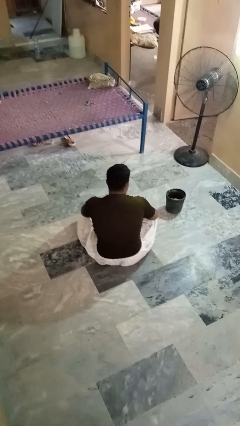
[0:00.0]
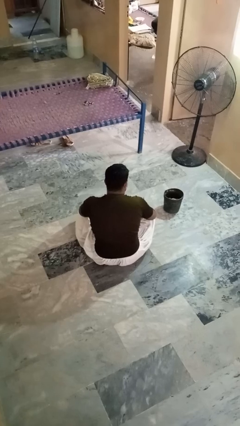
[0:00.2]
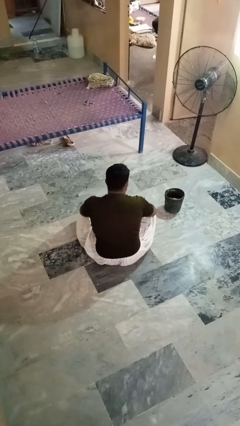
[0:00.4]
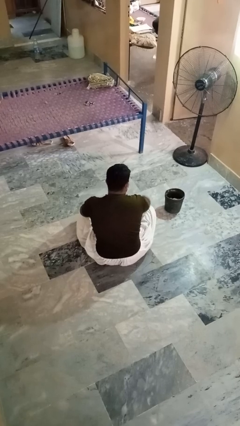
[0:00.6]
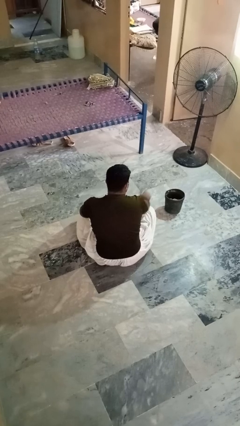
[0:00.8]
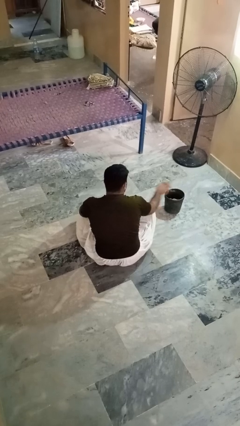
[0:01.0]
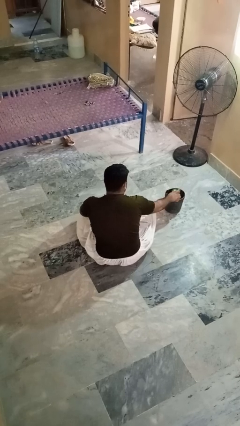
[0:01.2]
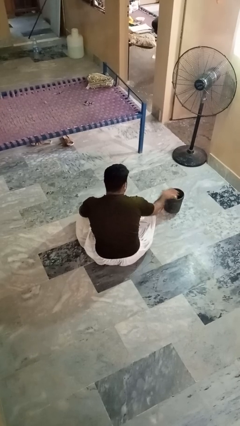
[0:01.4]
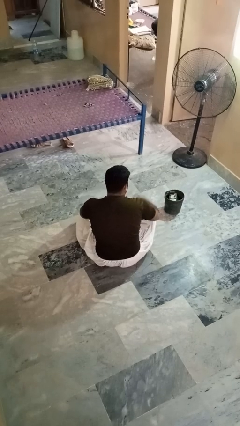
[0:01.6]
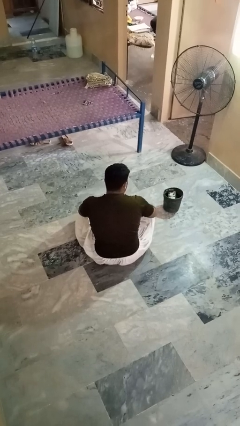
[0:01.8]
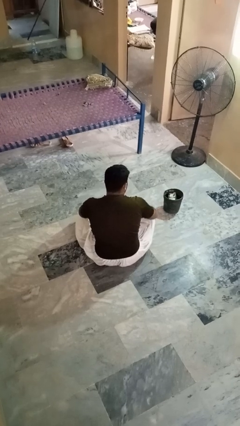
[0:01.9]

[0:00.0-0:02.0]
person puts object into basket

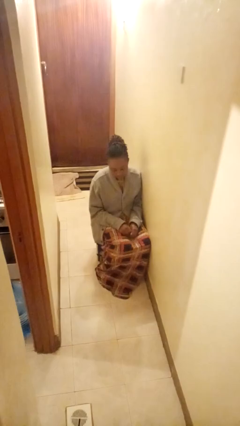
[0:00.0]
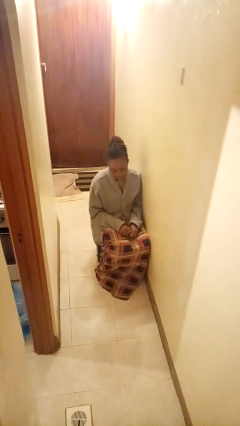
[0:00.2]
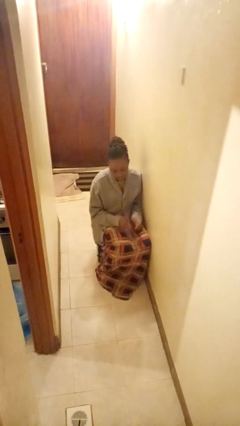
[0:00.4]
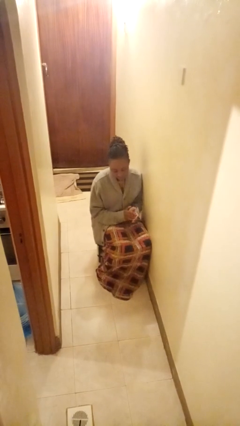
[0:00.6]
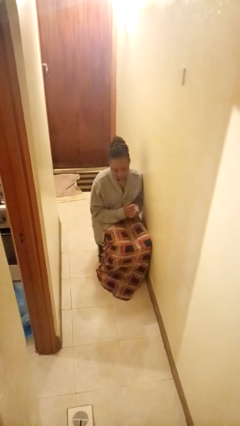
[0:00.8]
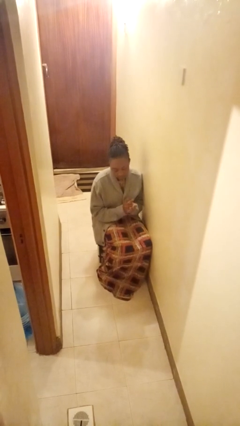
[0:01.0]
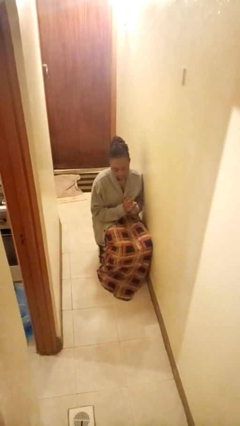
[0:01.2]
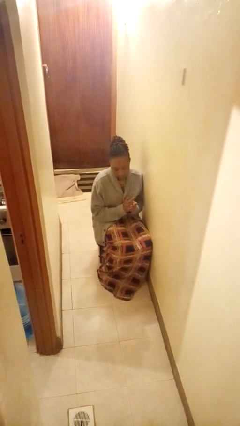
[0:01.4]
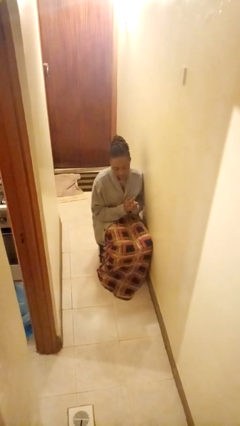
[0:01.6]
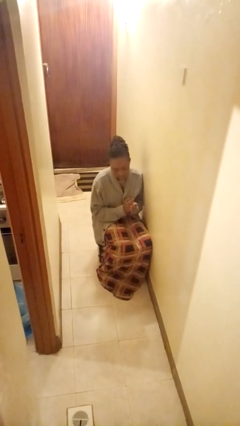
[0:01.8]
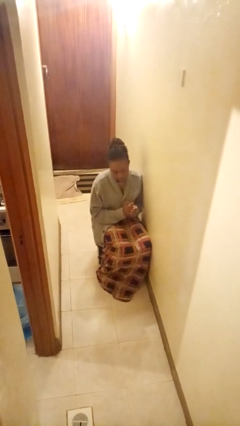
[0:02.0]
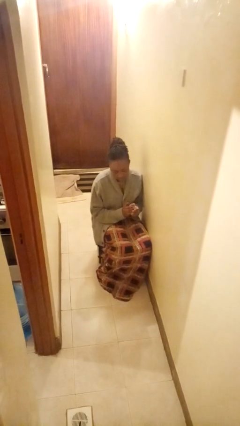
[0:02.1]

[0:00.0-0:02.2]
person claps hands

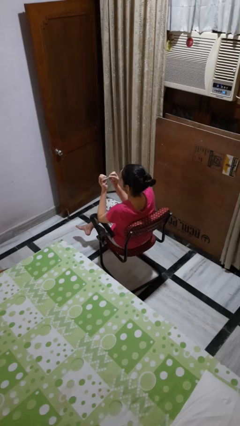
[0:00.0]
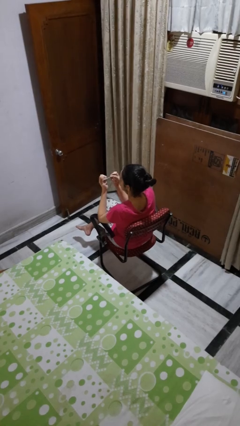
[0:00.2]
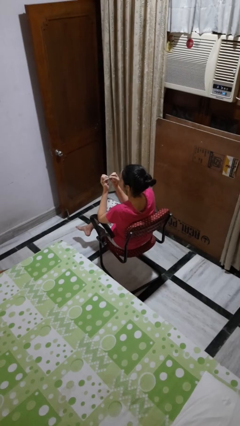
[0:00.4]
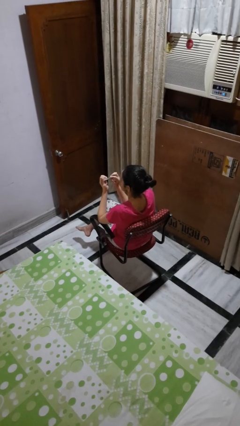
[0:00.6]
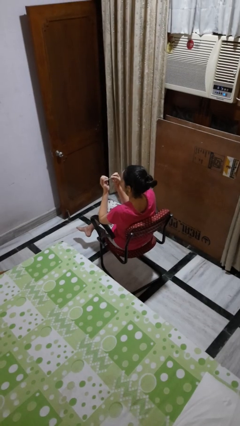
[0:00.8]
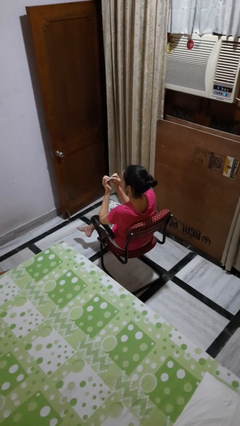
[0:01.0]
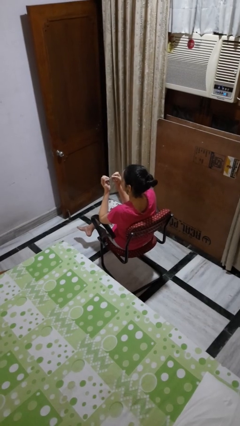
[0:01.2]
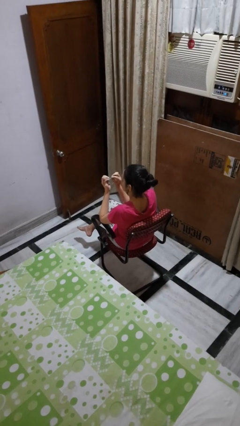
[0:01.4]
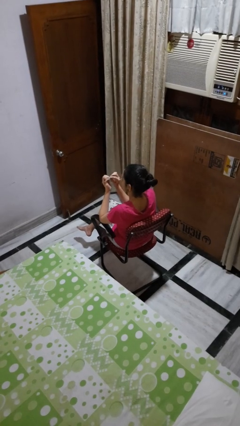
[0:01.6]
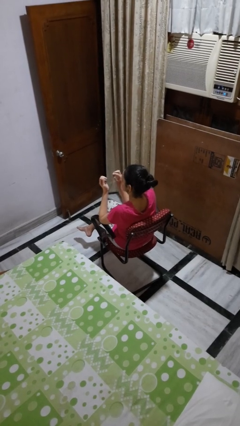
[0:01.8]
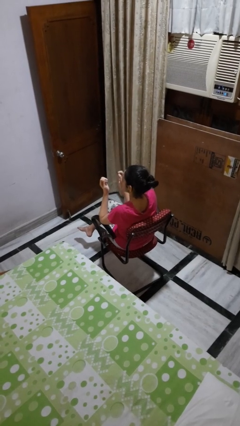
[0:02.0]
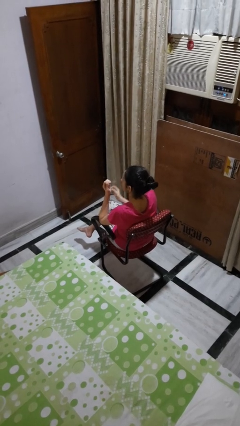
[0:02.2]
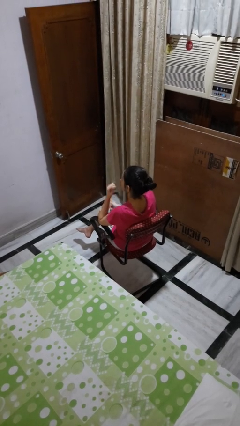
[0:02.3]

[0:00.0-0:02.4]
person files fingernails

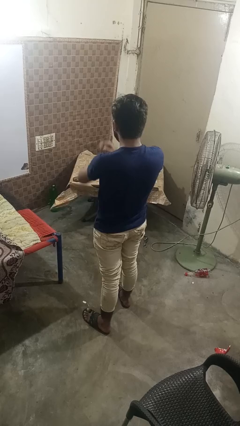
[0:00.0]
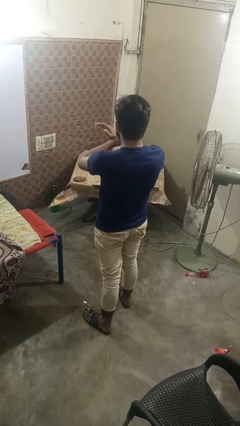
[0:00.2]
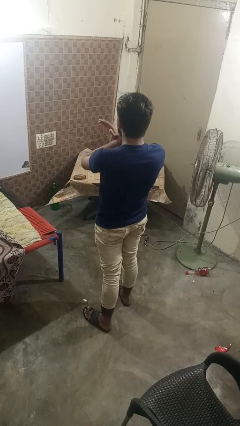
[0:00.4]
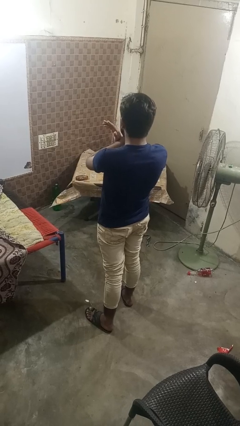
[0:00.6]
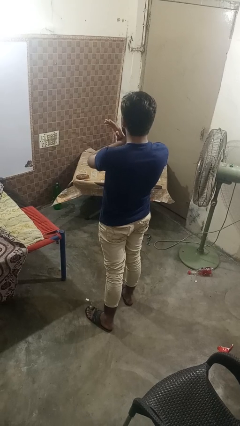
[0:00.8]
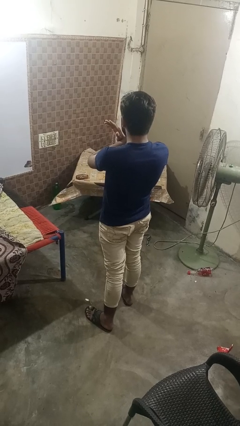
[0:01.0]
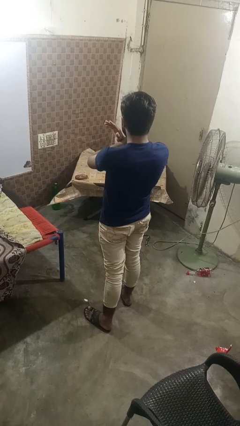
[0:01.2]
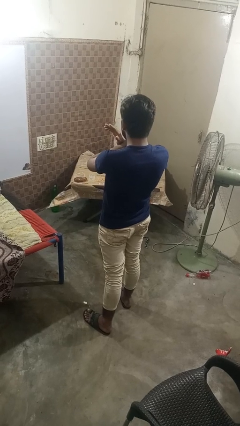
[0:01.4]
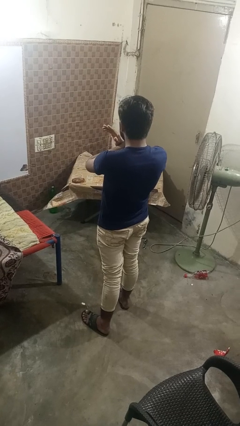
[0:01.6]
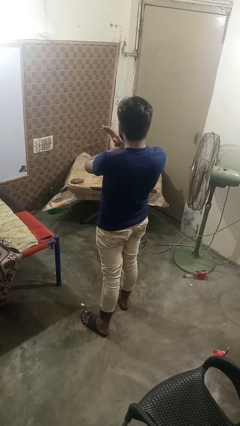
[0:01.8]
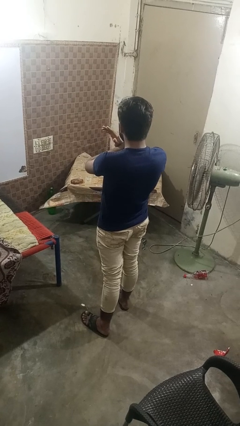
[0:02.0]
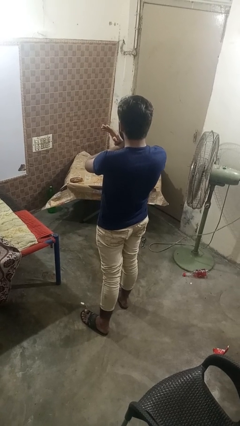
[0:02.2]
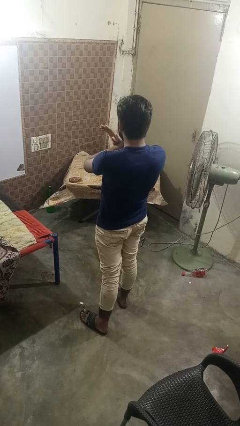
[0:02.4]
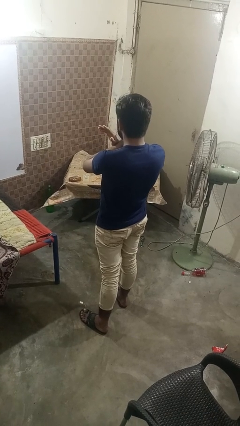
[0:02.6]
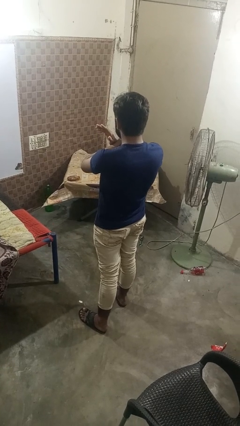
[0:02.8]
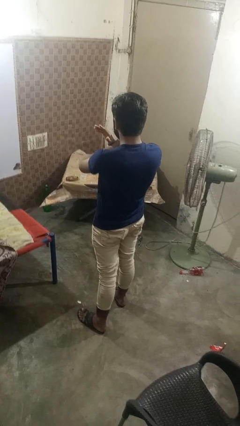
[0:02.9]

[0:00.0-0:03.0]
person karate chop

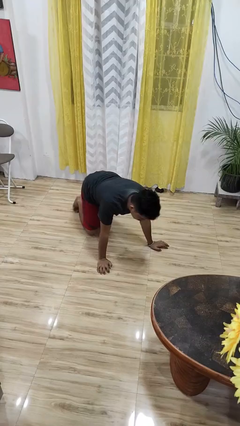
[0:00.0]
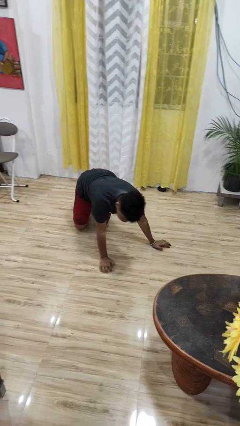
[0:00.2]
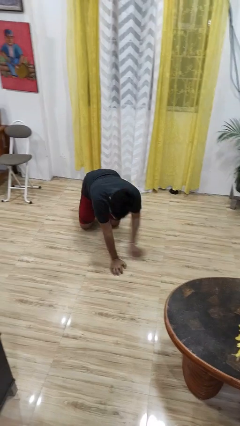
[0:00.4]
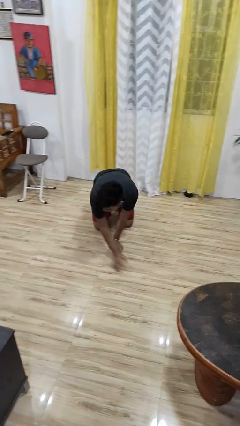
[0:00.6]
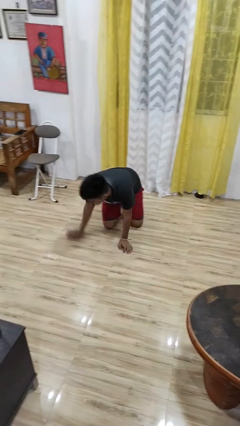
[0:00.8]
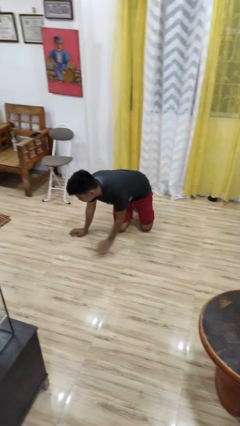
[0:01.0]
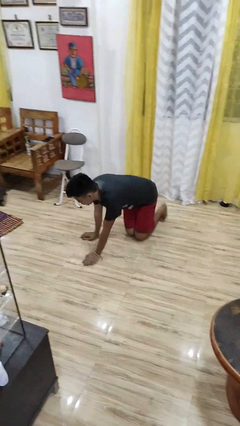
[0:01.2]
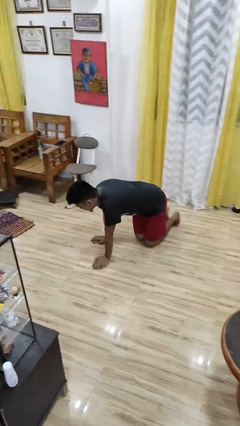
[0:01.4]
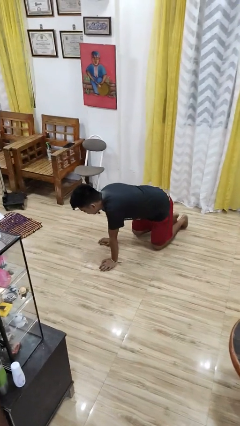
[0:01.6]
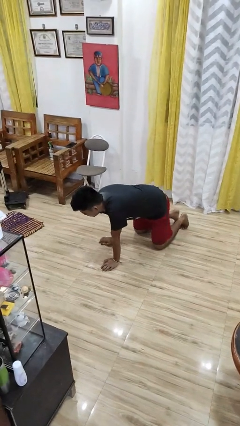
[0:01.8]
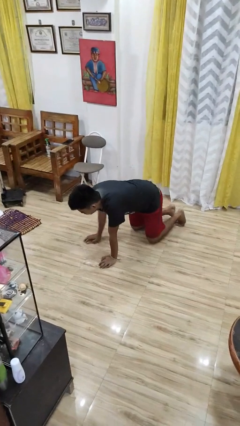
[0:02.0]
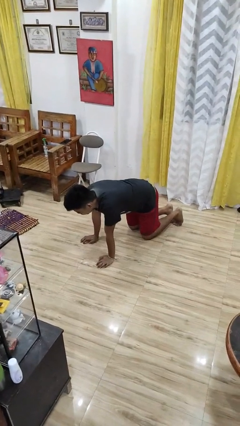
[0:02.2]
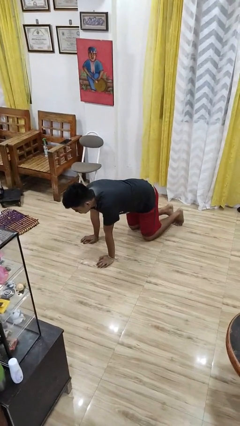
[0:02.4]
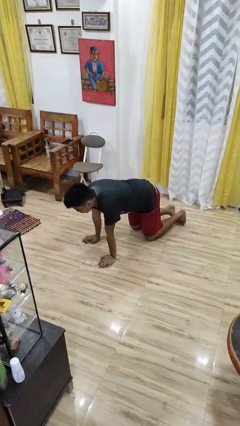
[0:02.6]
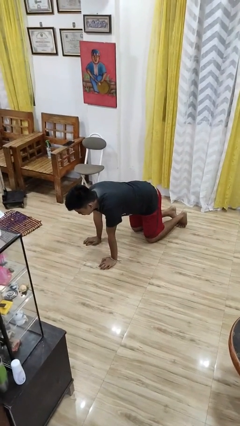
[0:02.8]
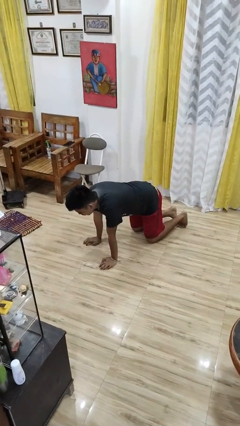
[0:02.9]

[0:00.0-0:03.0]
person crawls

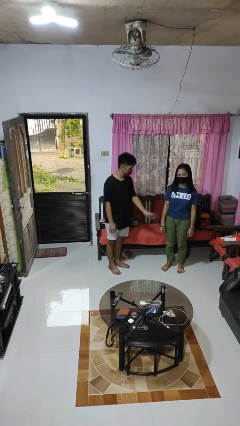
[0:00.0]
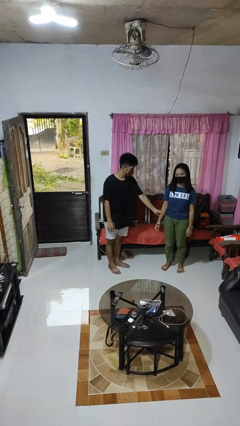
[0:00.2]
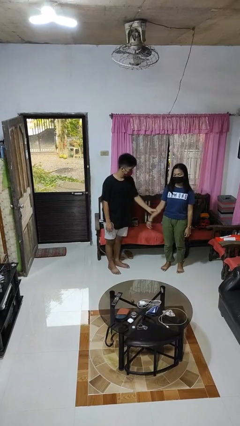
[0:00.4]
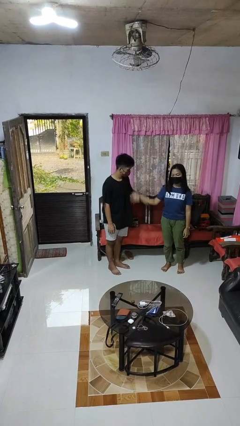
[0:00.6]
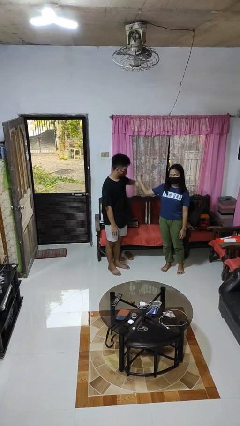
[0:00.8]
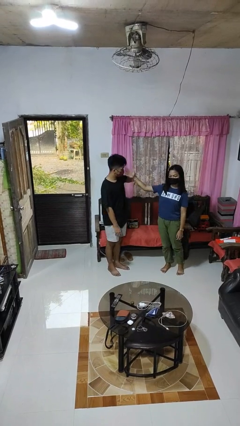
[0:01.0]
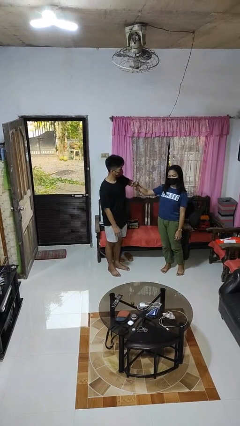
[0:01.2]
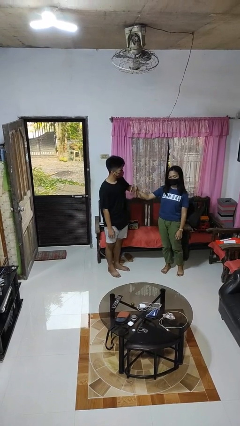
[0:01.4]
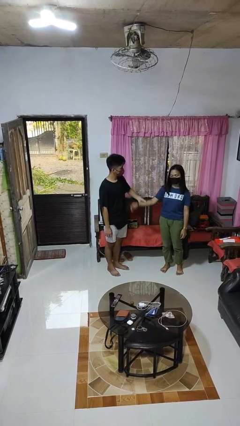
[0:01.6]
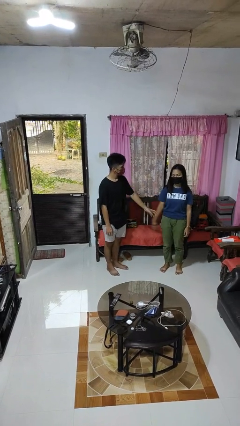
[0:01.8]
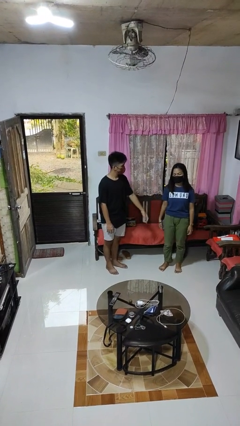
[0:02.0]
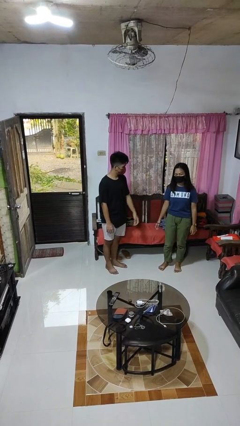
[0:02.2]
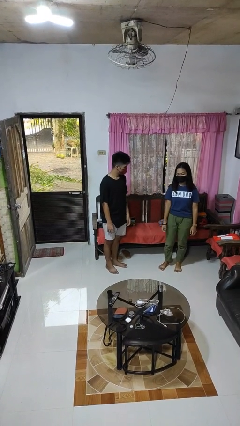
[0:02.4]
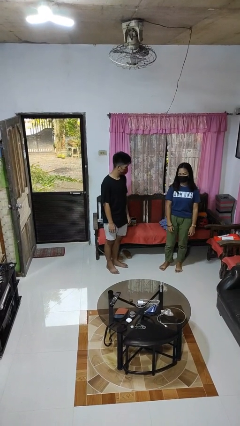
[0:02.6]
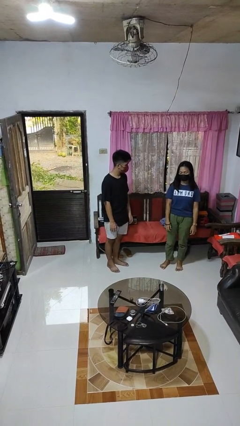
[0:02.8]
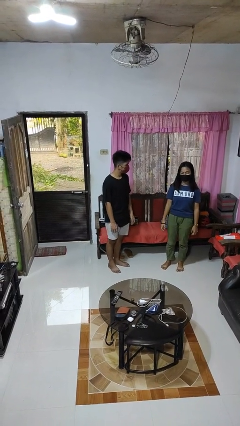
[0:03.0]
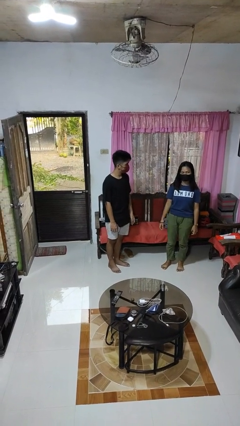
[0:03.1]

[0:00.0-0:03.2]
person grabs person by forearm

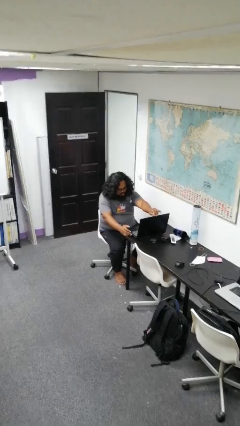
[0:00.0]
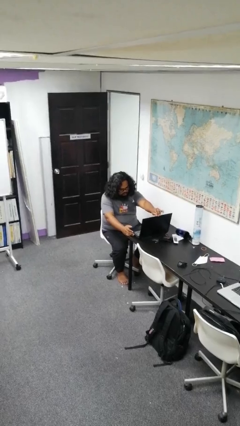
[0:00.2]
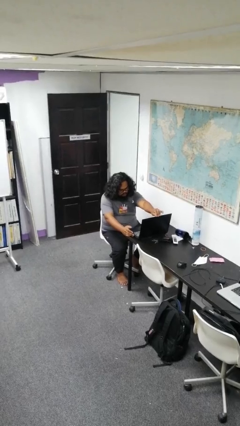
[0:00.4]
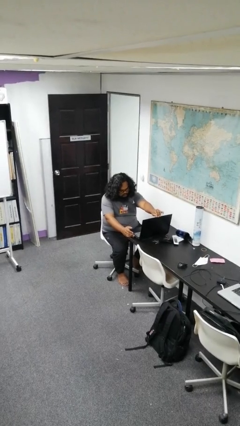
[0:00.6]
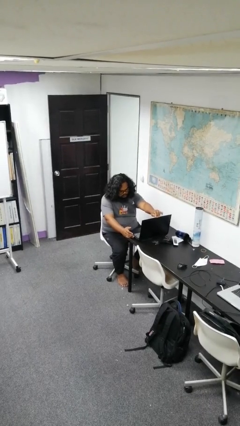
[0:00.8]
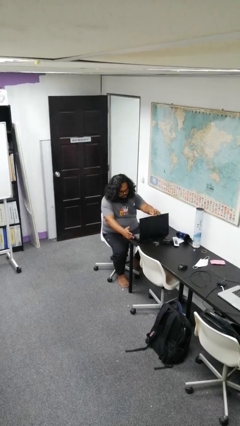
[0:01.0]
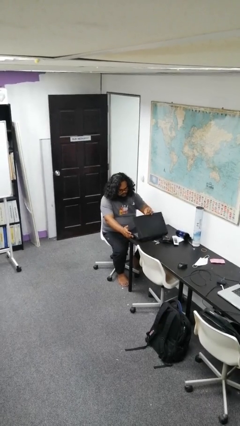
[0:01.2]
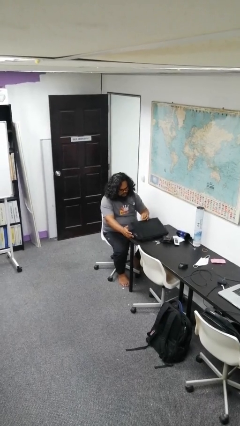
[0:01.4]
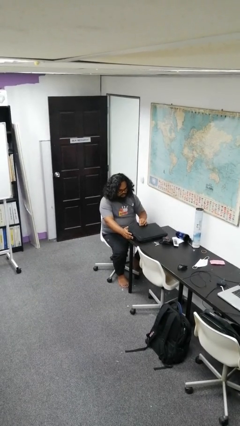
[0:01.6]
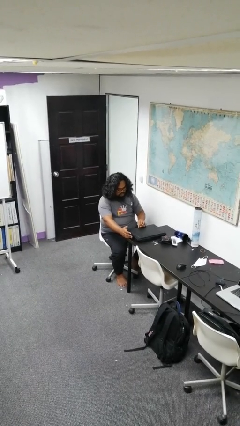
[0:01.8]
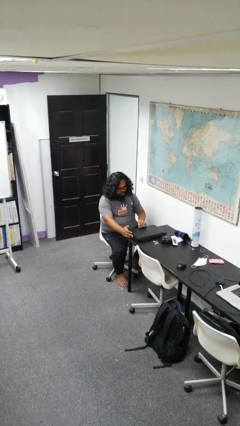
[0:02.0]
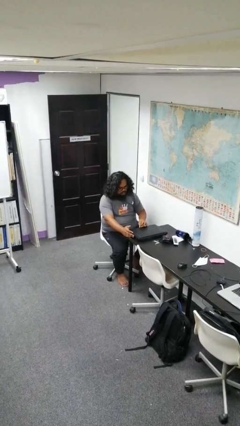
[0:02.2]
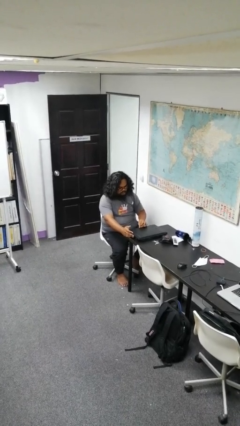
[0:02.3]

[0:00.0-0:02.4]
person closes laptop
